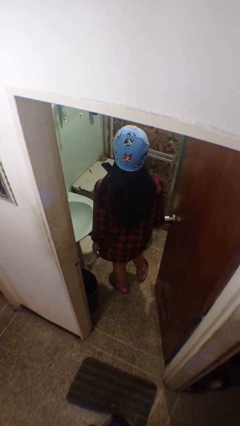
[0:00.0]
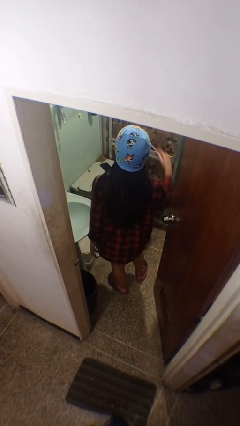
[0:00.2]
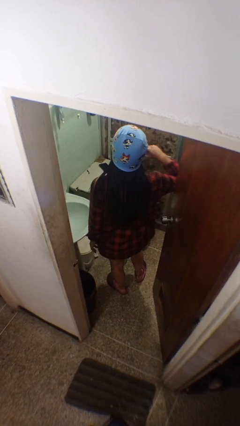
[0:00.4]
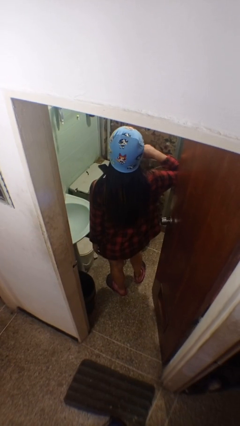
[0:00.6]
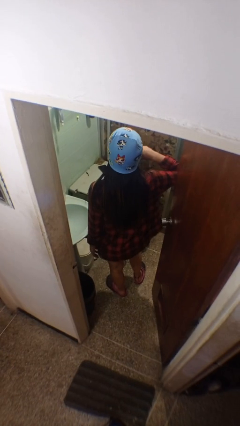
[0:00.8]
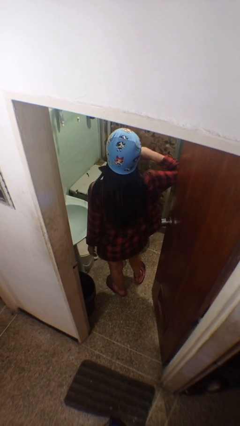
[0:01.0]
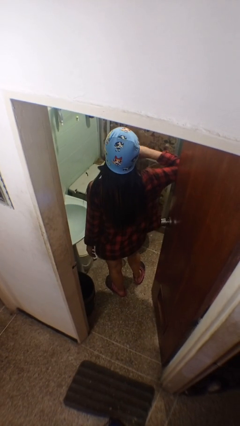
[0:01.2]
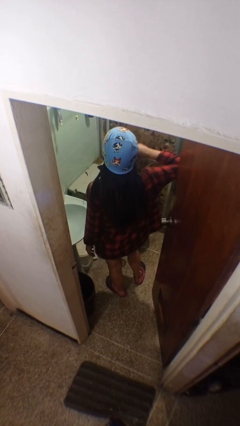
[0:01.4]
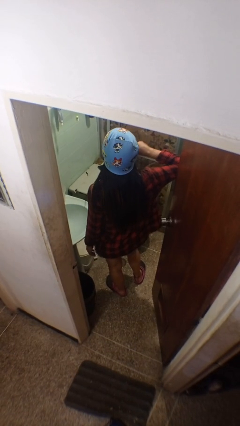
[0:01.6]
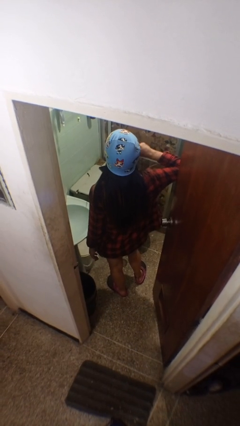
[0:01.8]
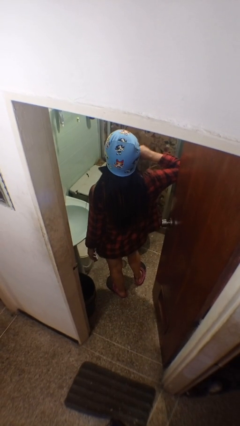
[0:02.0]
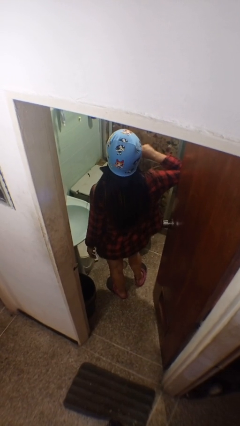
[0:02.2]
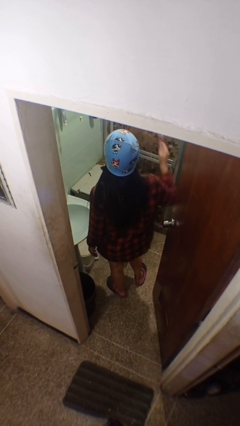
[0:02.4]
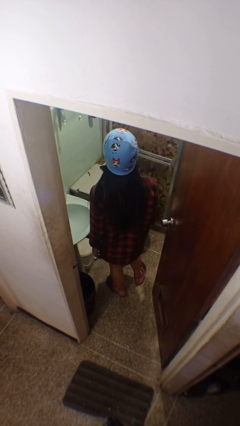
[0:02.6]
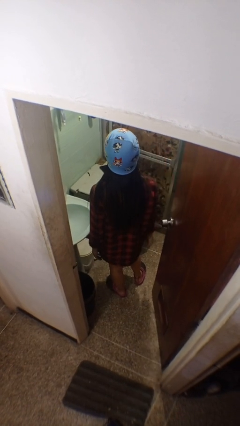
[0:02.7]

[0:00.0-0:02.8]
person brushes teeth

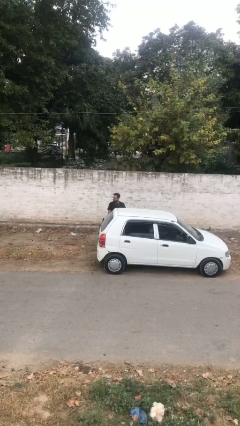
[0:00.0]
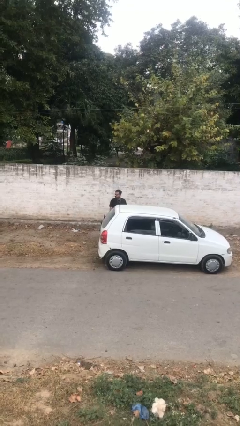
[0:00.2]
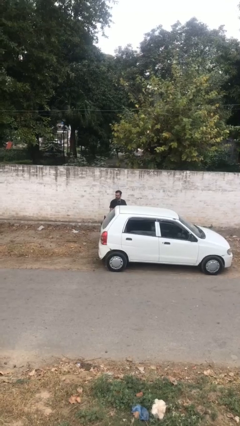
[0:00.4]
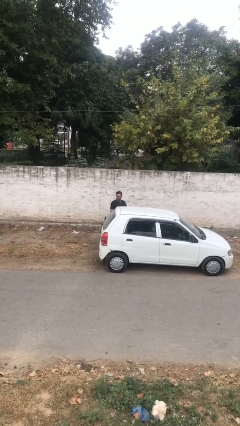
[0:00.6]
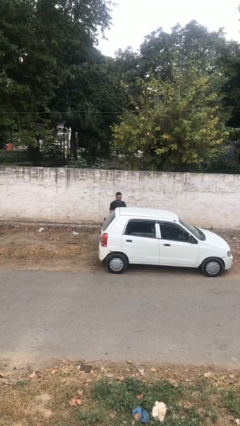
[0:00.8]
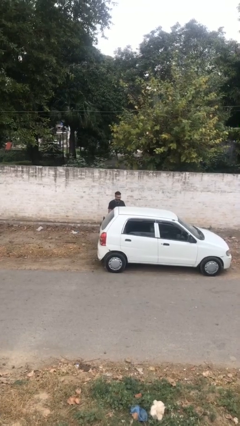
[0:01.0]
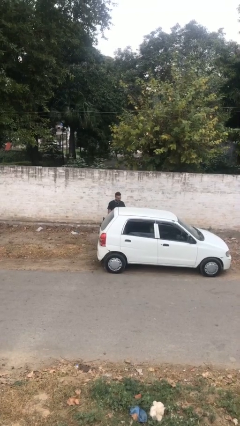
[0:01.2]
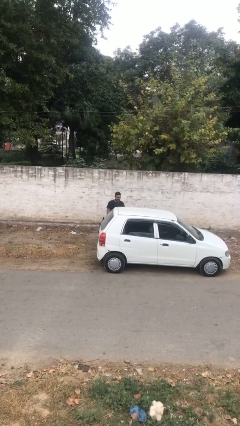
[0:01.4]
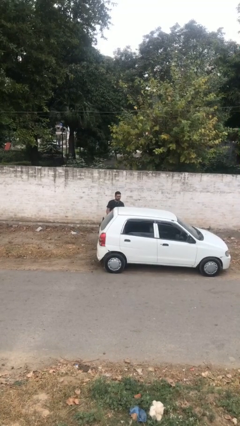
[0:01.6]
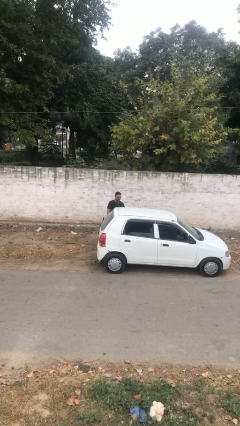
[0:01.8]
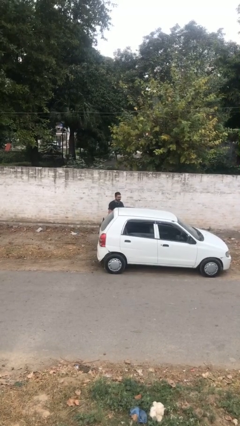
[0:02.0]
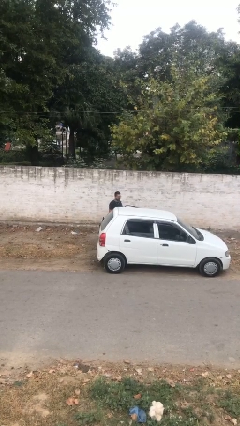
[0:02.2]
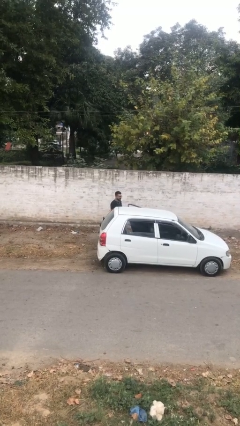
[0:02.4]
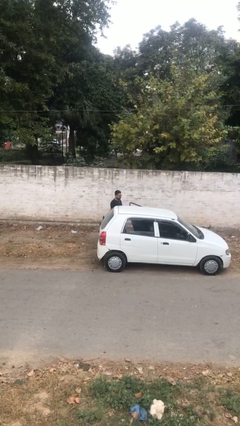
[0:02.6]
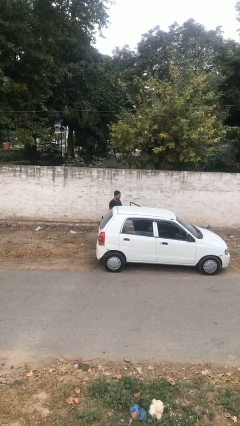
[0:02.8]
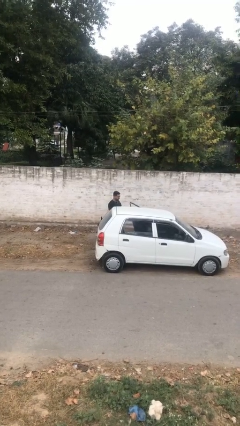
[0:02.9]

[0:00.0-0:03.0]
person opens car door

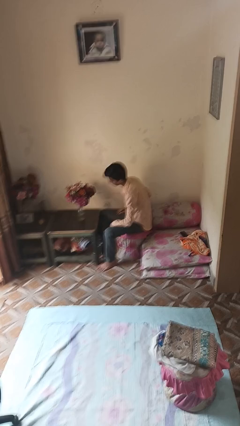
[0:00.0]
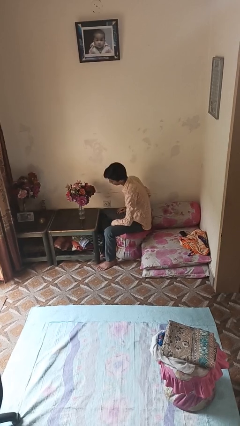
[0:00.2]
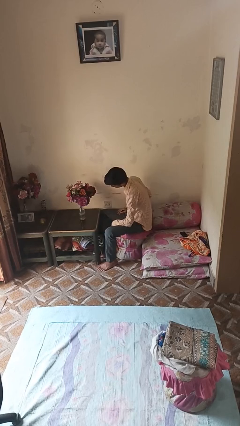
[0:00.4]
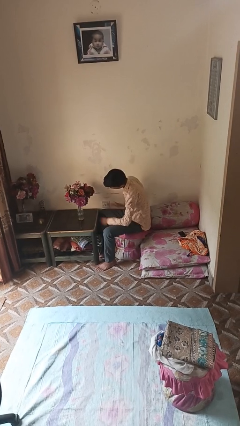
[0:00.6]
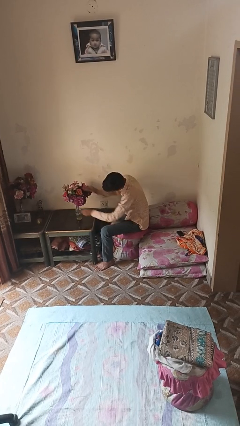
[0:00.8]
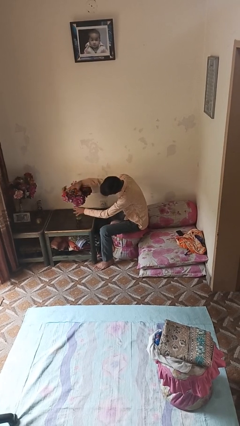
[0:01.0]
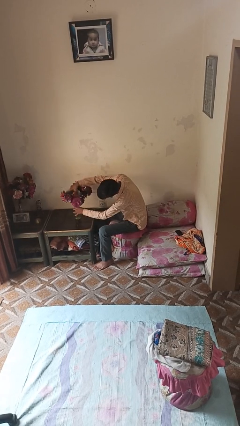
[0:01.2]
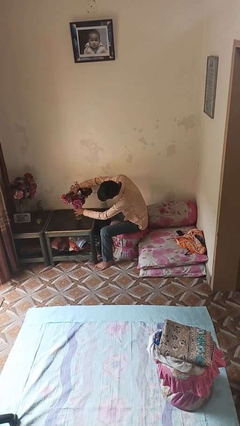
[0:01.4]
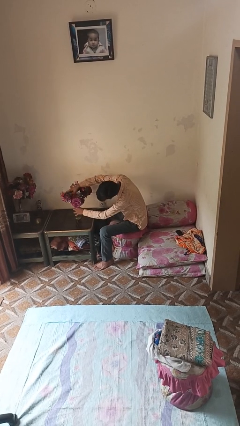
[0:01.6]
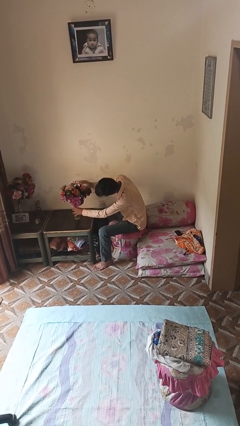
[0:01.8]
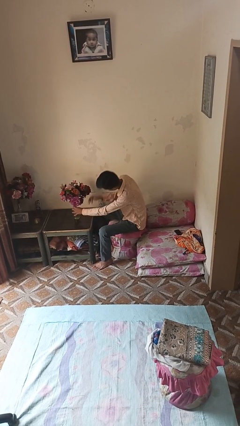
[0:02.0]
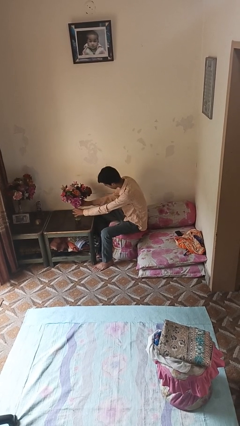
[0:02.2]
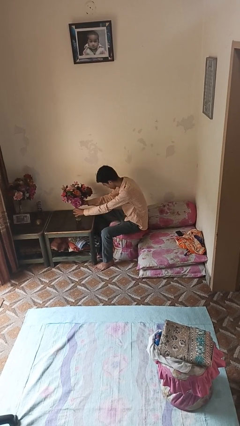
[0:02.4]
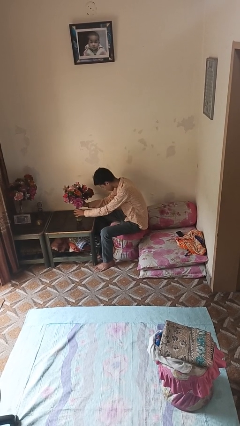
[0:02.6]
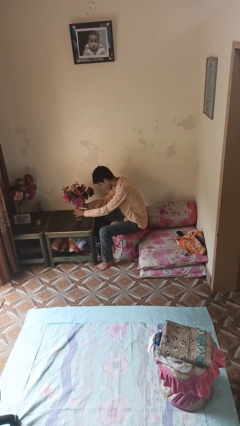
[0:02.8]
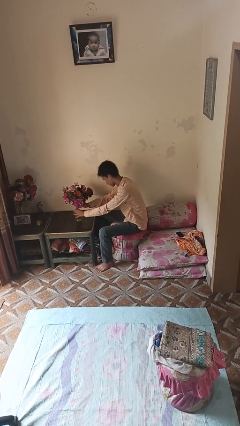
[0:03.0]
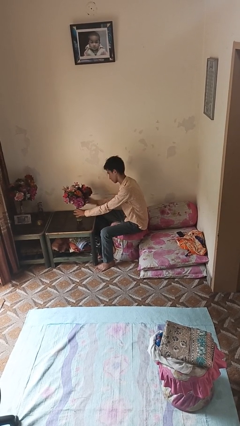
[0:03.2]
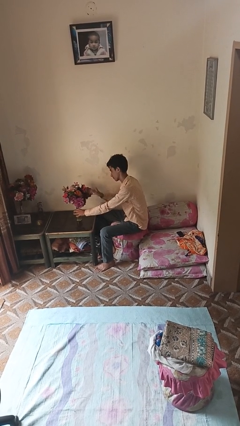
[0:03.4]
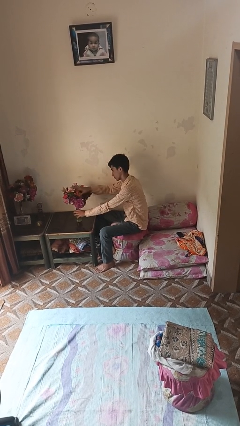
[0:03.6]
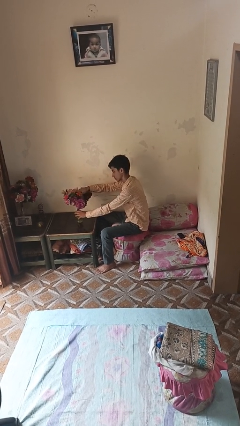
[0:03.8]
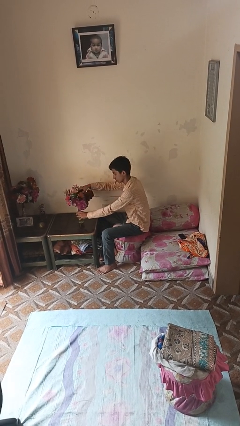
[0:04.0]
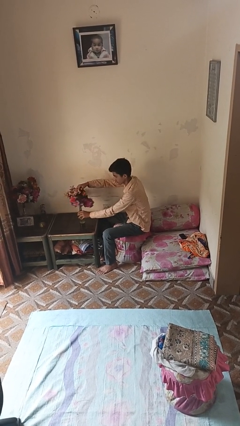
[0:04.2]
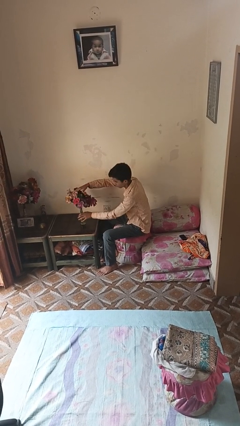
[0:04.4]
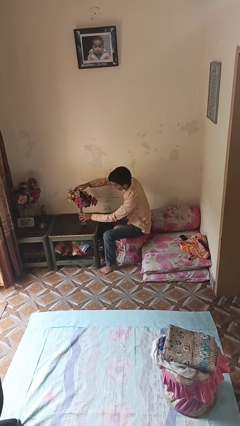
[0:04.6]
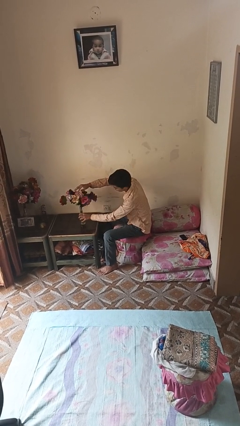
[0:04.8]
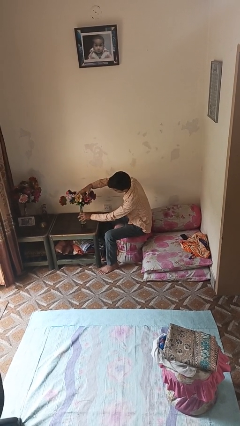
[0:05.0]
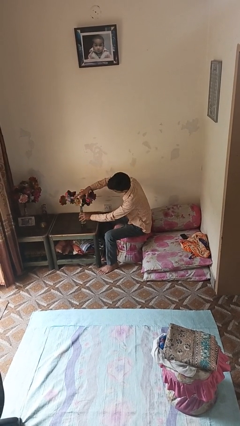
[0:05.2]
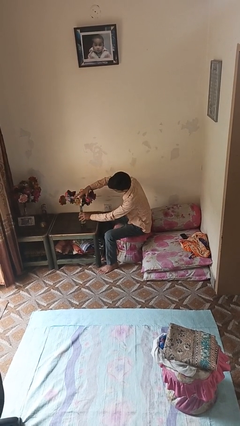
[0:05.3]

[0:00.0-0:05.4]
person arranges flowers in vase

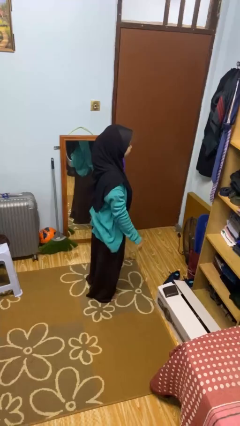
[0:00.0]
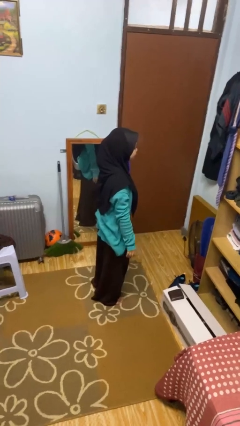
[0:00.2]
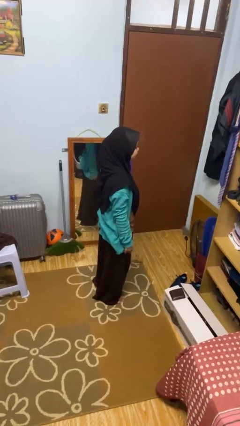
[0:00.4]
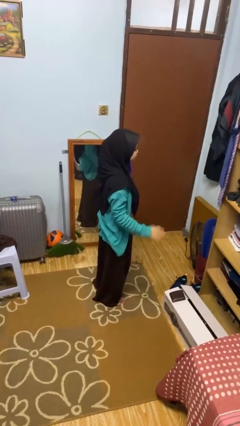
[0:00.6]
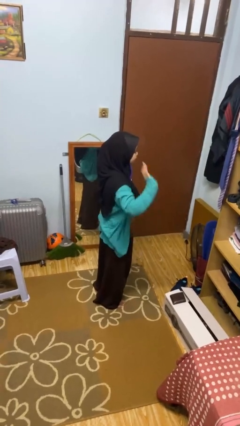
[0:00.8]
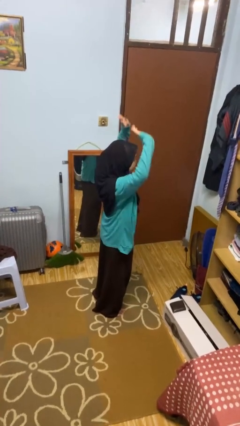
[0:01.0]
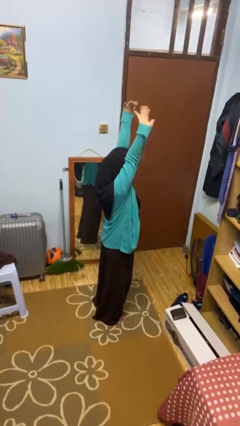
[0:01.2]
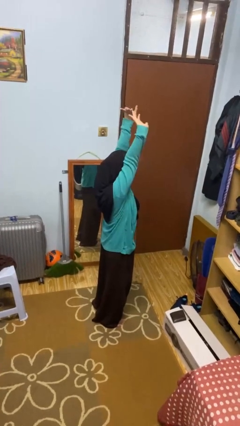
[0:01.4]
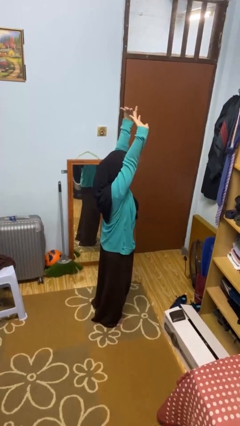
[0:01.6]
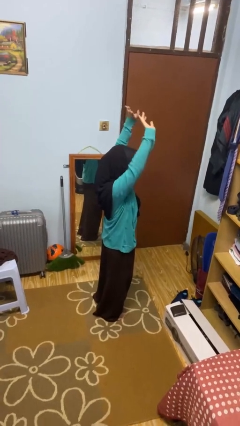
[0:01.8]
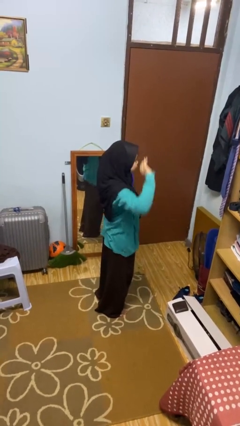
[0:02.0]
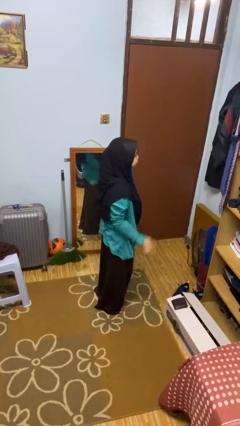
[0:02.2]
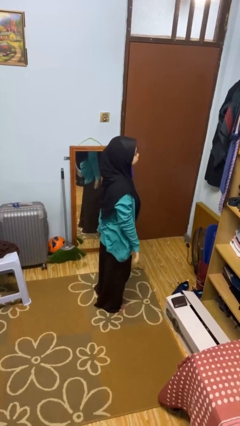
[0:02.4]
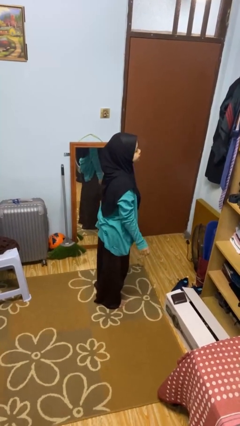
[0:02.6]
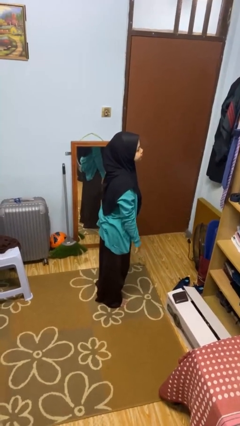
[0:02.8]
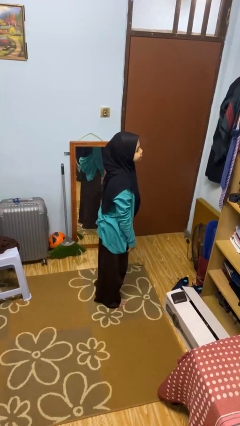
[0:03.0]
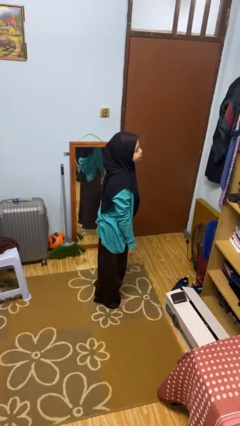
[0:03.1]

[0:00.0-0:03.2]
person stretches arms over head

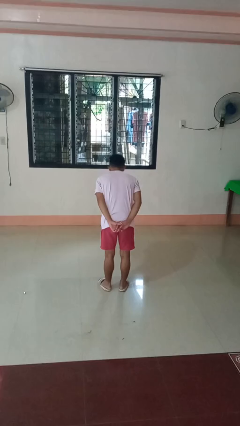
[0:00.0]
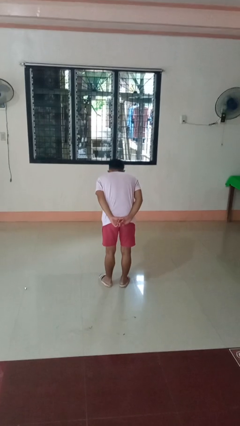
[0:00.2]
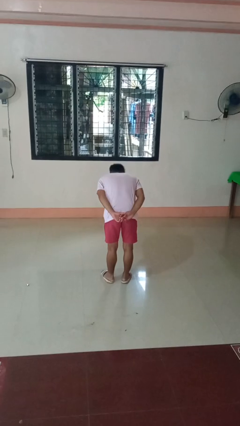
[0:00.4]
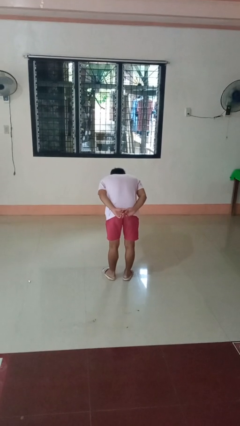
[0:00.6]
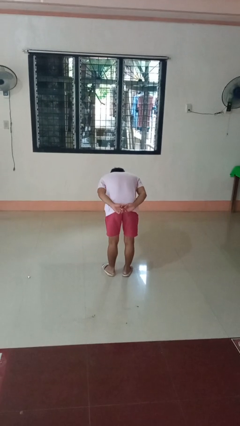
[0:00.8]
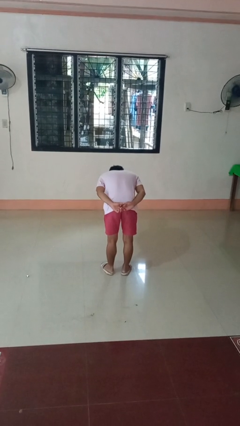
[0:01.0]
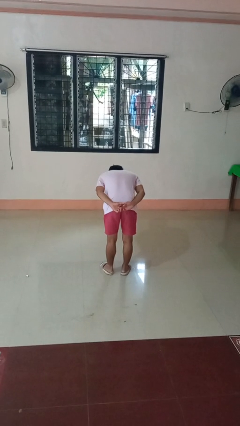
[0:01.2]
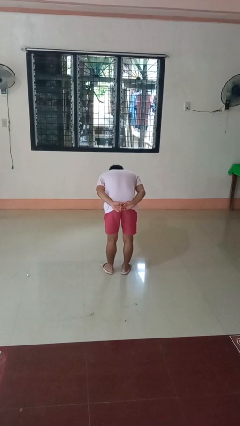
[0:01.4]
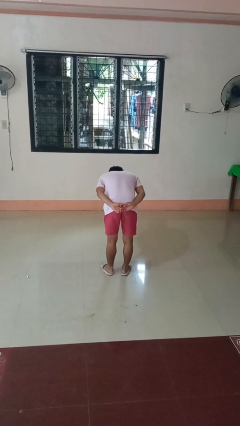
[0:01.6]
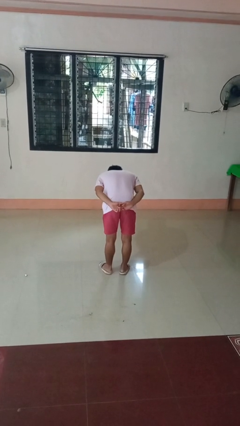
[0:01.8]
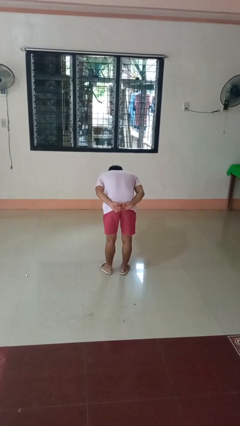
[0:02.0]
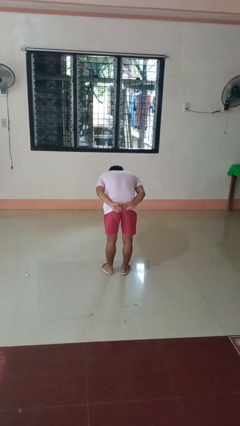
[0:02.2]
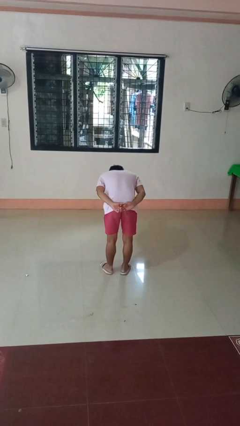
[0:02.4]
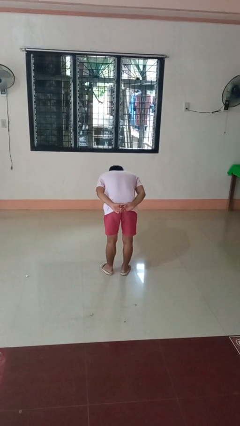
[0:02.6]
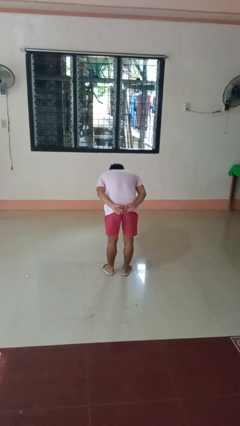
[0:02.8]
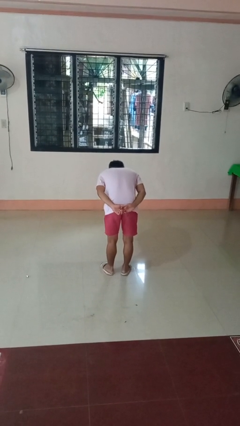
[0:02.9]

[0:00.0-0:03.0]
person bows

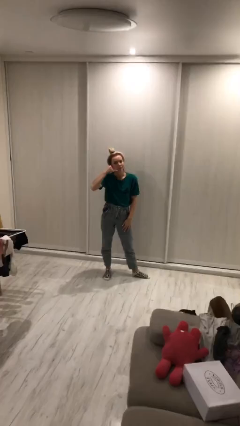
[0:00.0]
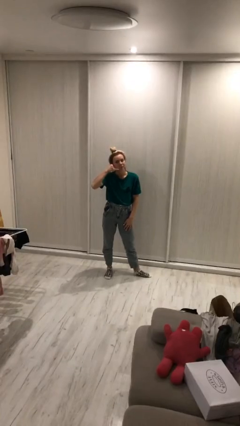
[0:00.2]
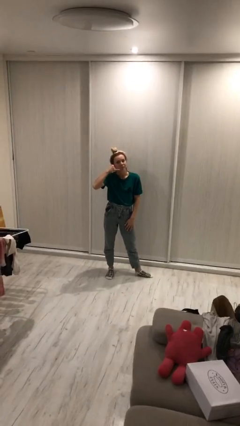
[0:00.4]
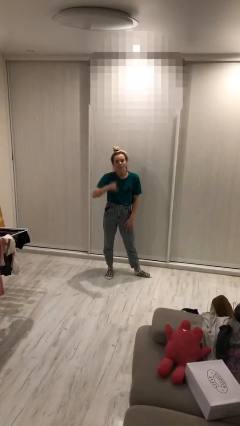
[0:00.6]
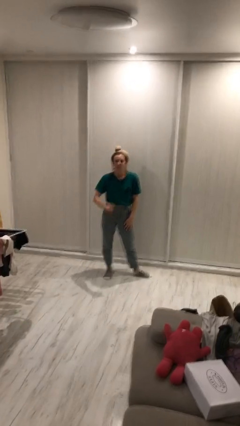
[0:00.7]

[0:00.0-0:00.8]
person gestures call me
